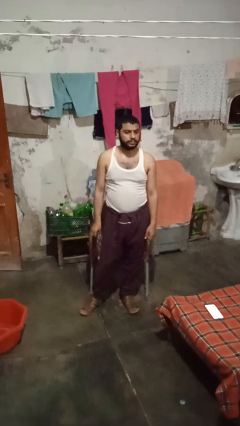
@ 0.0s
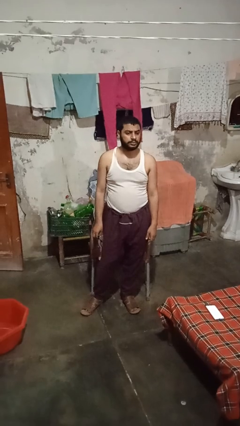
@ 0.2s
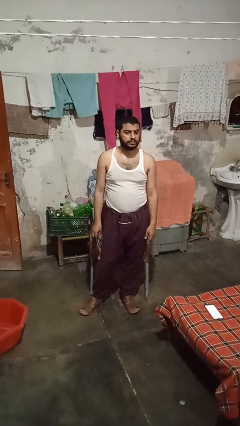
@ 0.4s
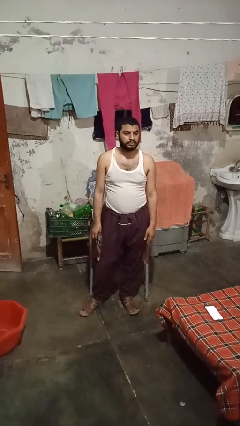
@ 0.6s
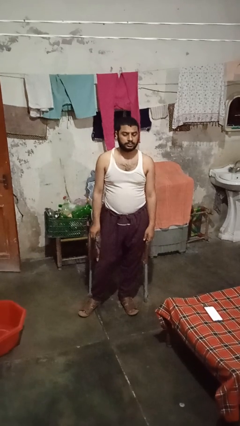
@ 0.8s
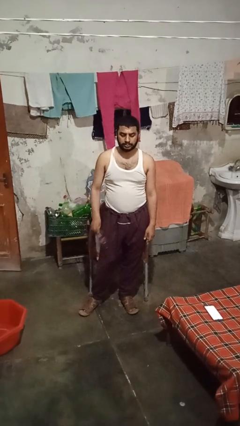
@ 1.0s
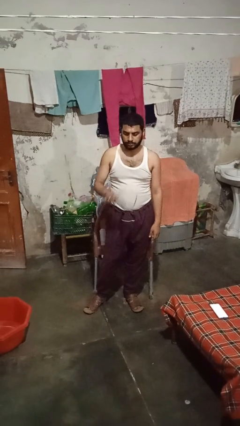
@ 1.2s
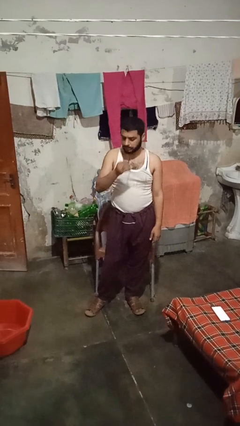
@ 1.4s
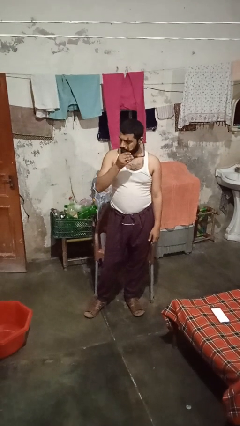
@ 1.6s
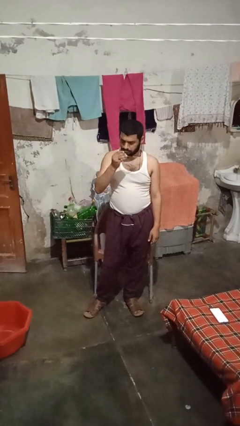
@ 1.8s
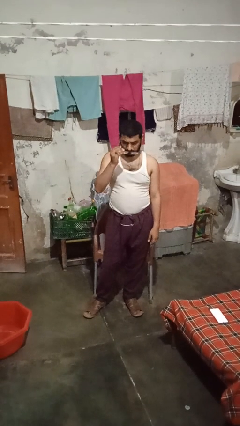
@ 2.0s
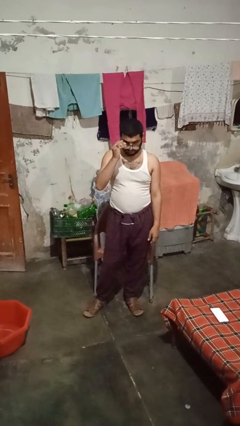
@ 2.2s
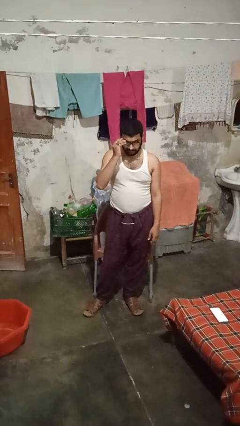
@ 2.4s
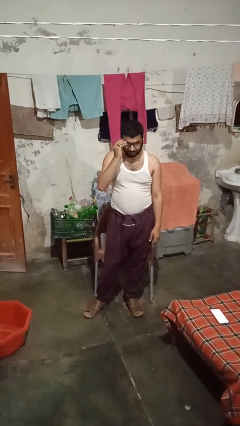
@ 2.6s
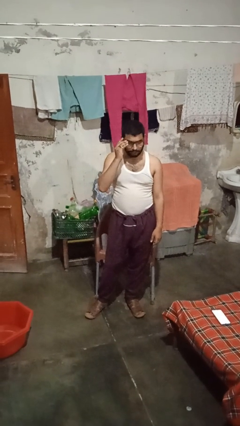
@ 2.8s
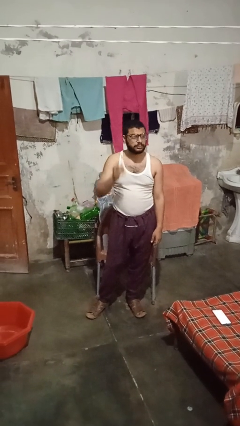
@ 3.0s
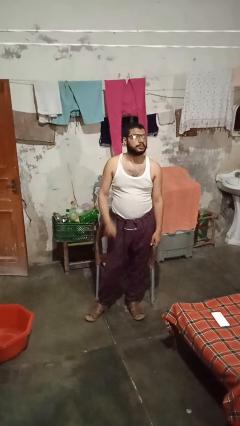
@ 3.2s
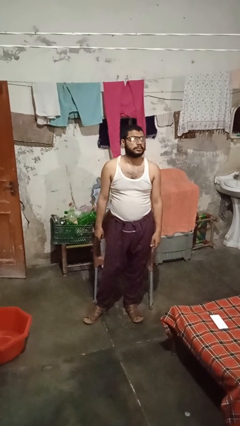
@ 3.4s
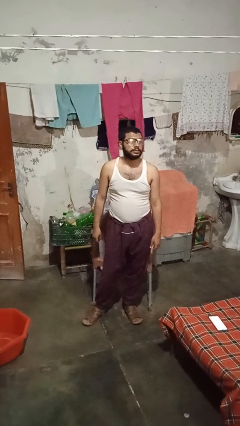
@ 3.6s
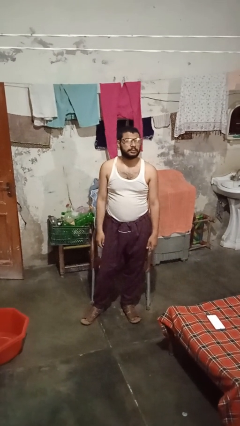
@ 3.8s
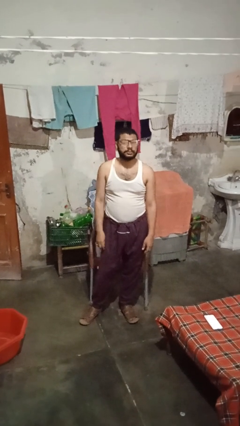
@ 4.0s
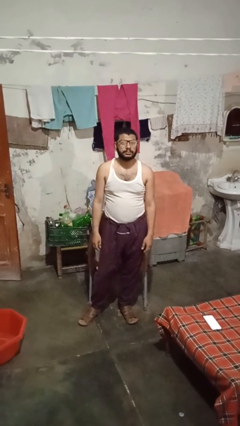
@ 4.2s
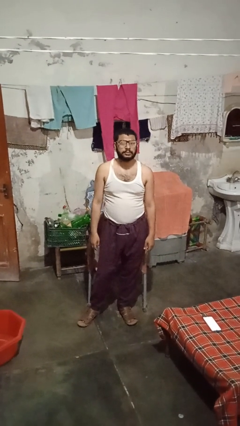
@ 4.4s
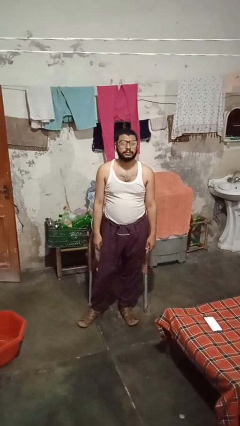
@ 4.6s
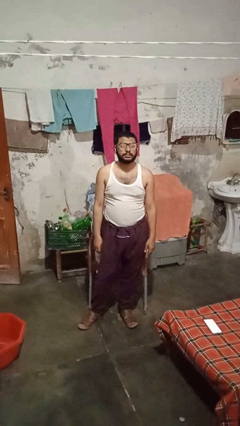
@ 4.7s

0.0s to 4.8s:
person puts on glasses

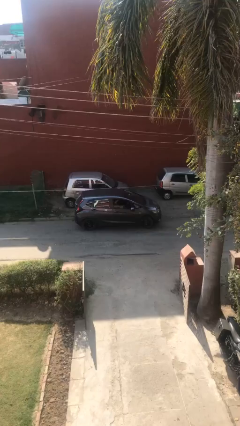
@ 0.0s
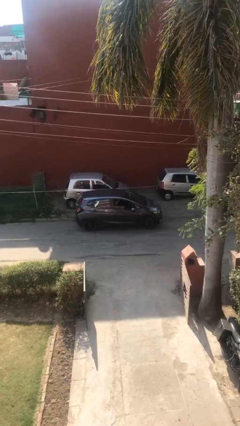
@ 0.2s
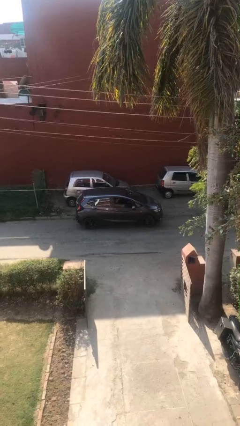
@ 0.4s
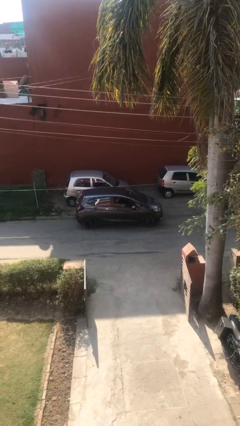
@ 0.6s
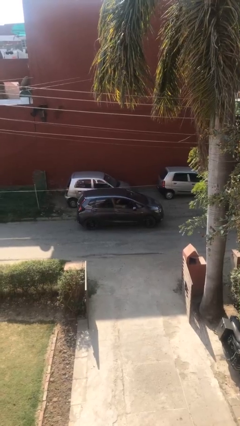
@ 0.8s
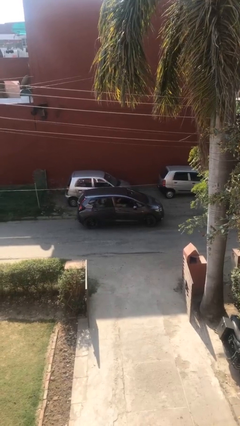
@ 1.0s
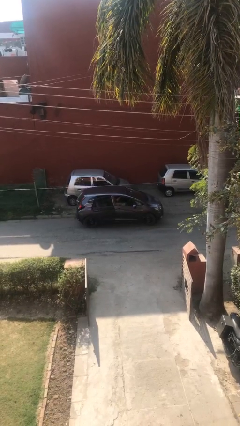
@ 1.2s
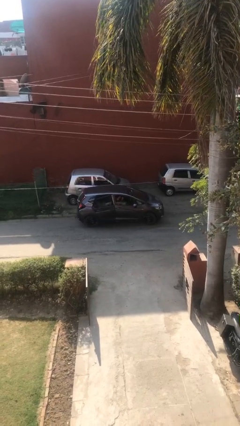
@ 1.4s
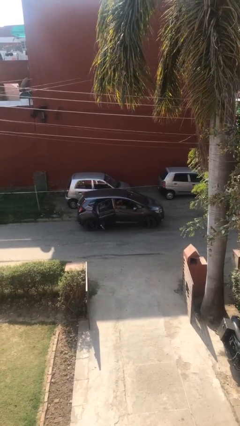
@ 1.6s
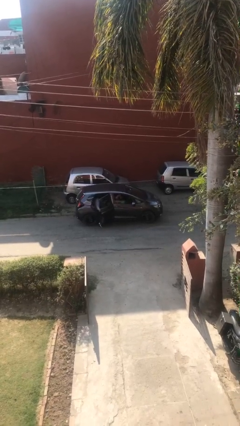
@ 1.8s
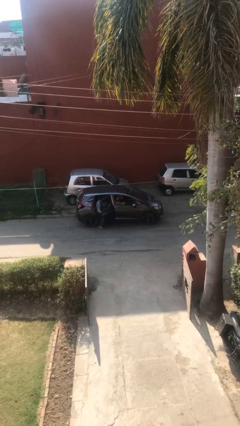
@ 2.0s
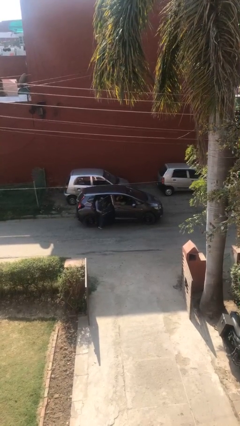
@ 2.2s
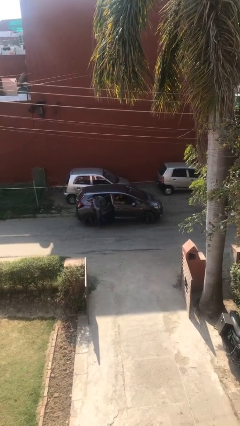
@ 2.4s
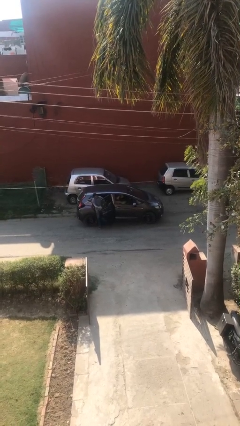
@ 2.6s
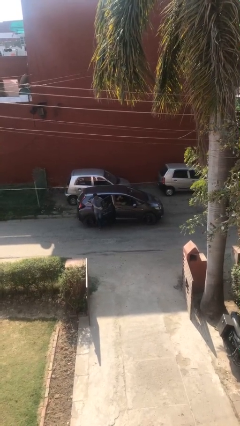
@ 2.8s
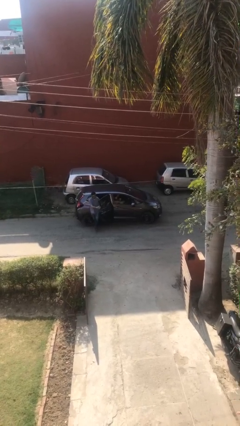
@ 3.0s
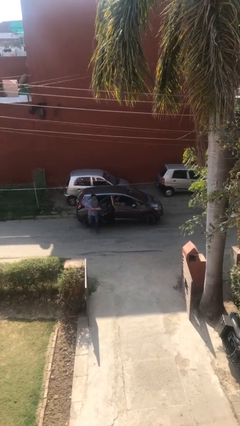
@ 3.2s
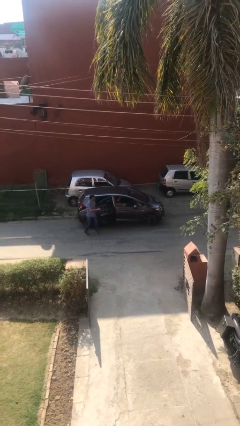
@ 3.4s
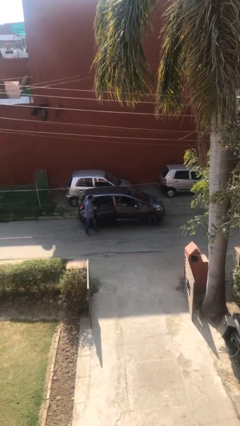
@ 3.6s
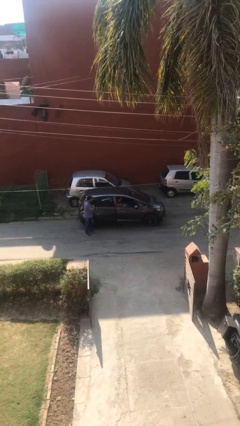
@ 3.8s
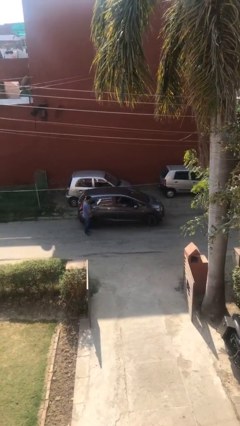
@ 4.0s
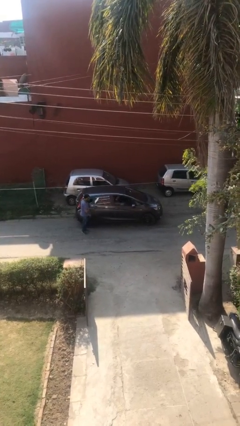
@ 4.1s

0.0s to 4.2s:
car drops off person

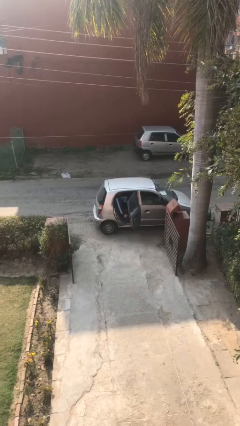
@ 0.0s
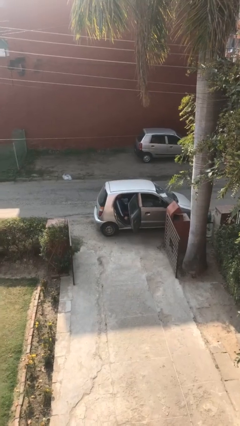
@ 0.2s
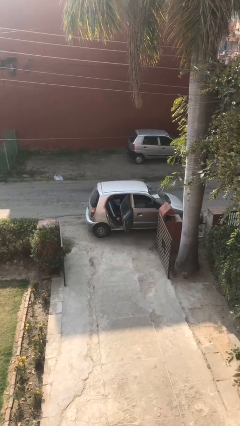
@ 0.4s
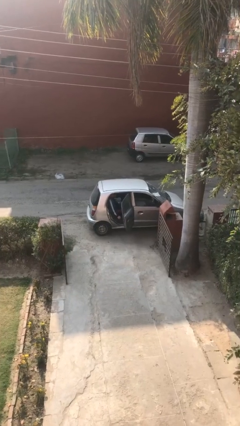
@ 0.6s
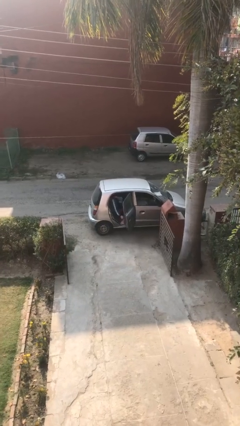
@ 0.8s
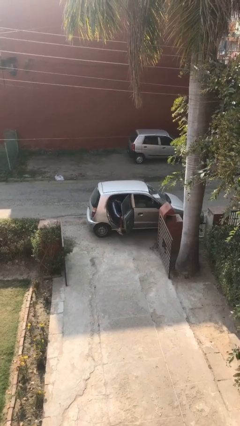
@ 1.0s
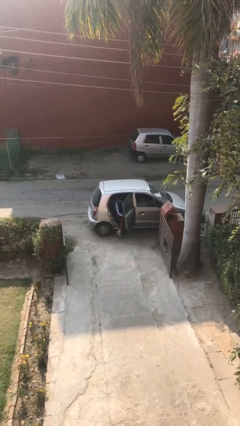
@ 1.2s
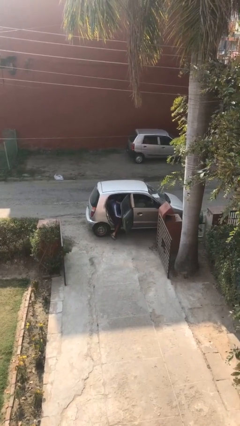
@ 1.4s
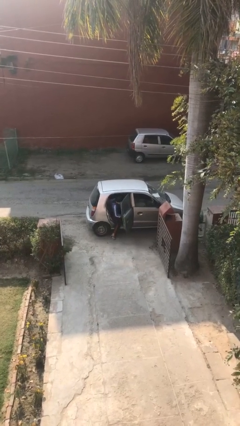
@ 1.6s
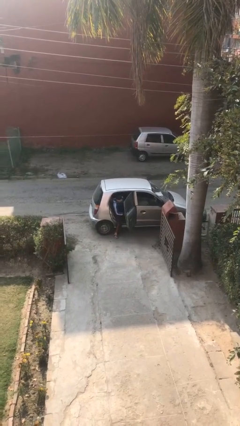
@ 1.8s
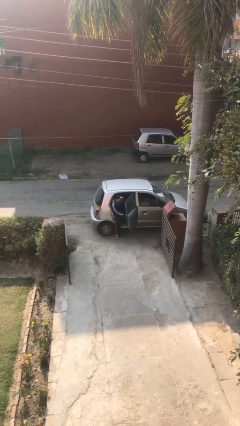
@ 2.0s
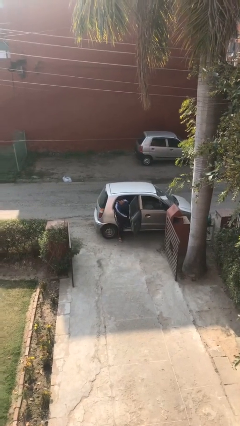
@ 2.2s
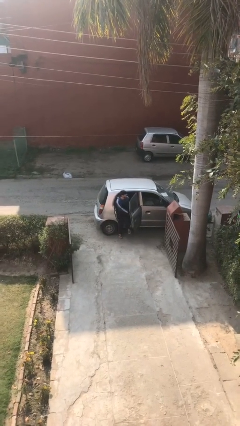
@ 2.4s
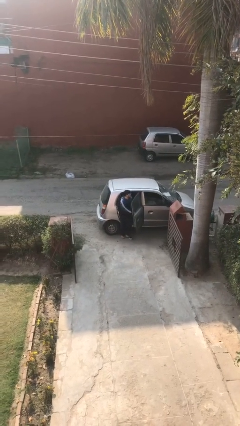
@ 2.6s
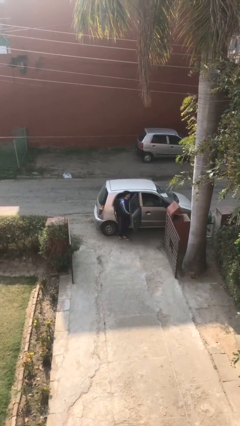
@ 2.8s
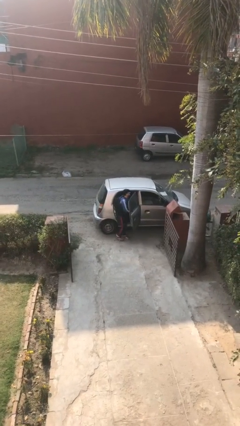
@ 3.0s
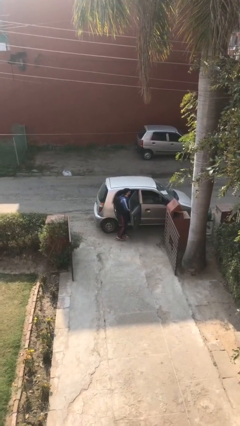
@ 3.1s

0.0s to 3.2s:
person exits car

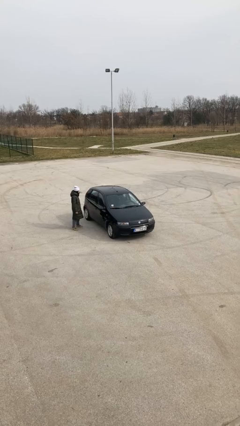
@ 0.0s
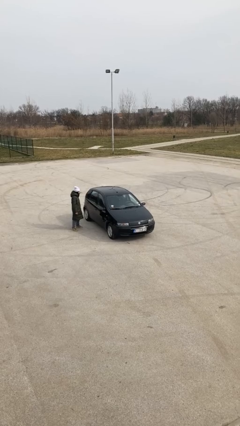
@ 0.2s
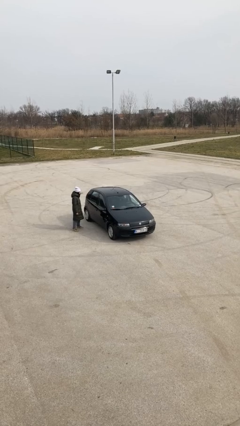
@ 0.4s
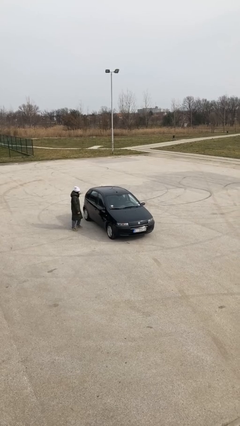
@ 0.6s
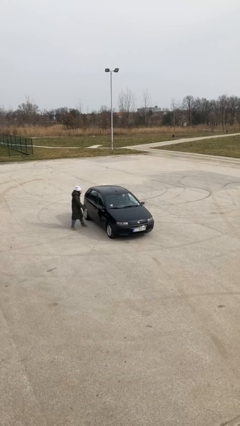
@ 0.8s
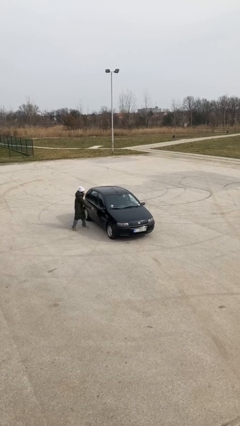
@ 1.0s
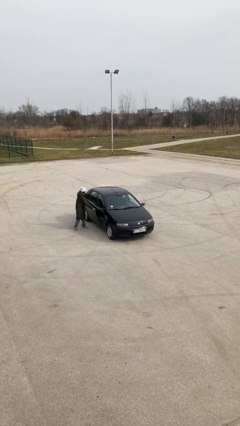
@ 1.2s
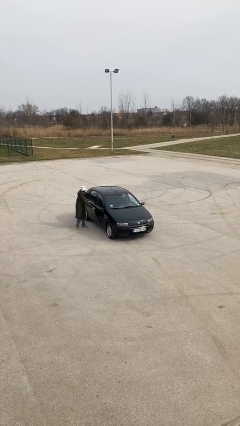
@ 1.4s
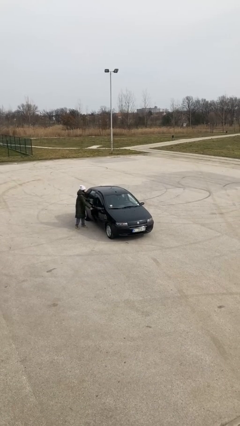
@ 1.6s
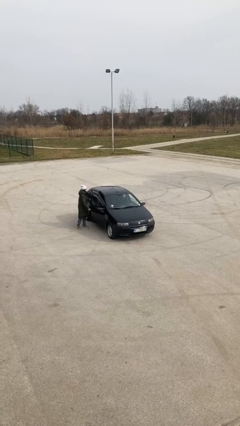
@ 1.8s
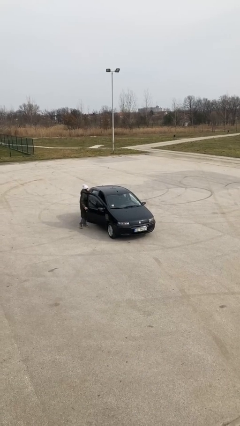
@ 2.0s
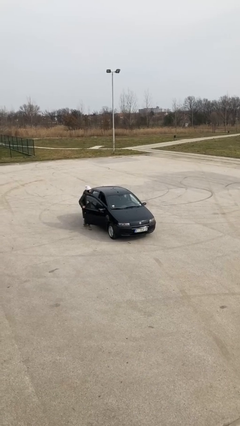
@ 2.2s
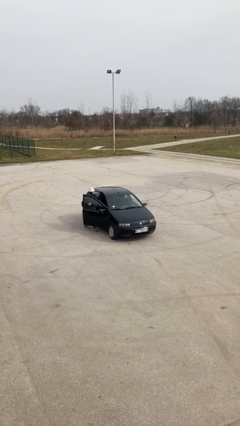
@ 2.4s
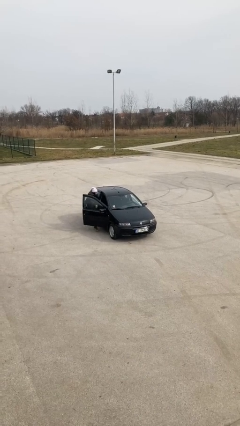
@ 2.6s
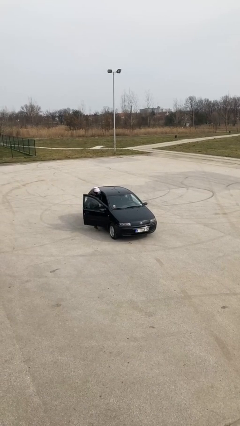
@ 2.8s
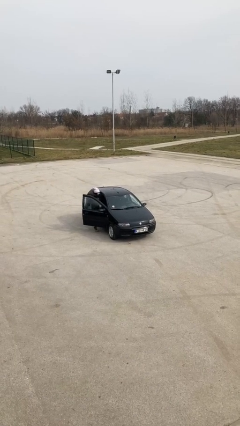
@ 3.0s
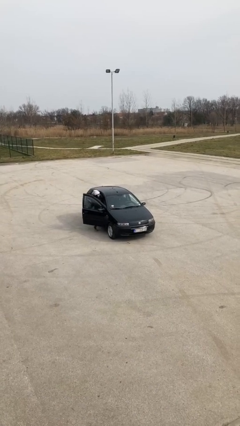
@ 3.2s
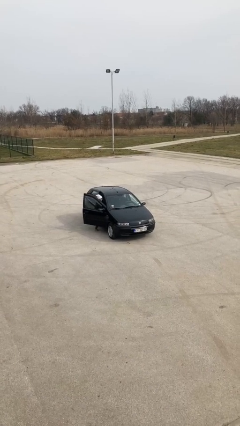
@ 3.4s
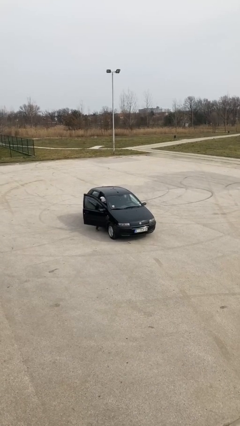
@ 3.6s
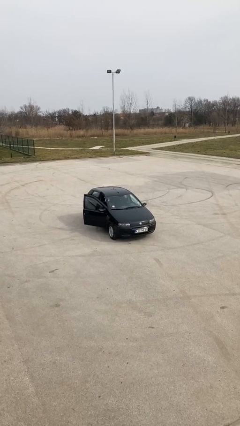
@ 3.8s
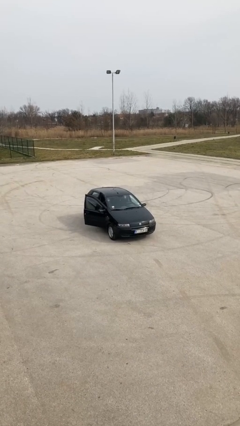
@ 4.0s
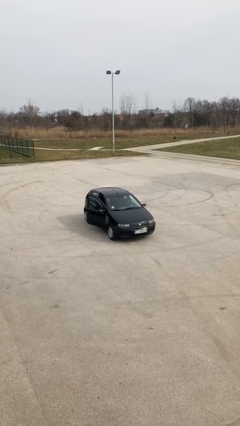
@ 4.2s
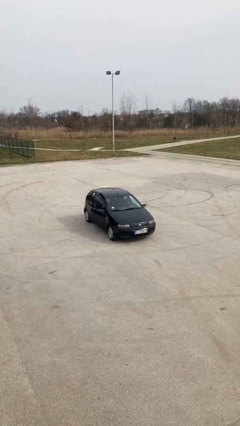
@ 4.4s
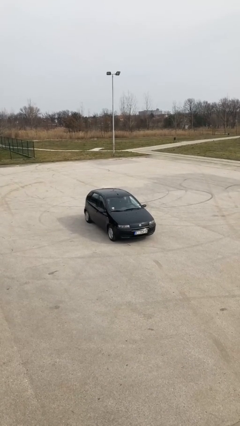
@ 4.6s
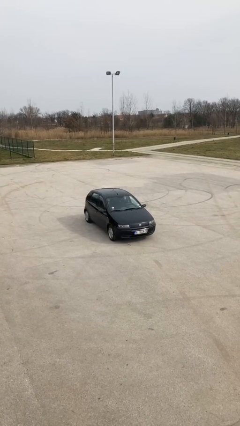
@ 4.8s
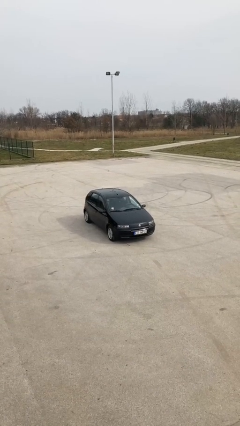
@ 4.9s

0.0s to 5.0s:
car picks up person

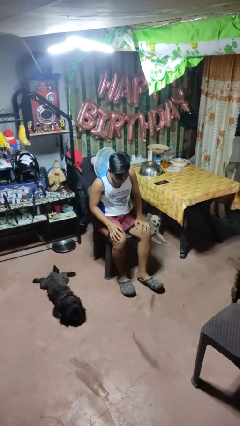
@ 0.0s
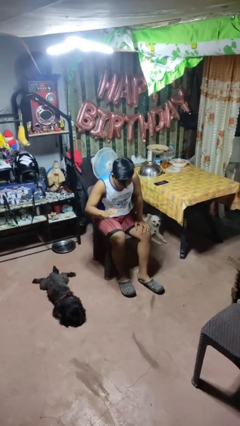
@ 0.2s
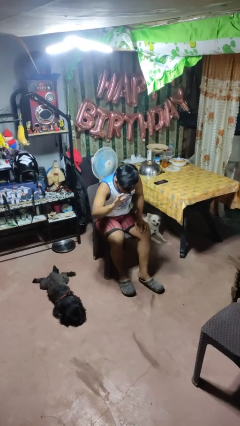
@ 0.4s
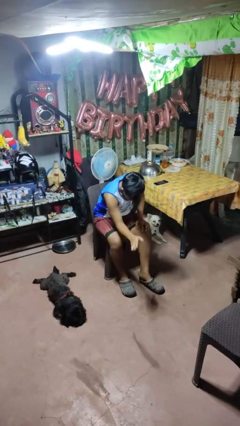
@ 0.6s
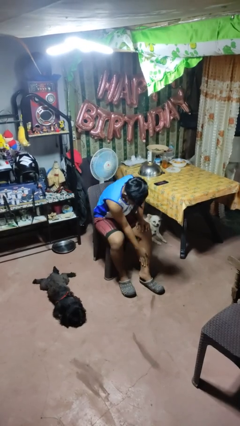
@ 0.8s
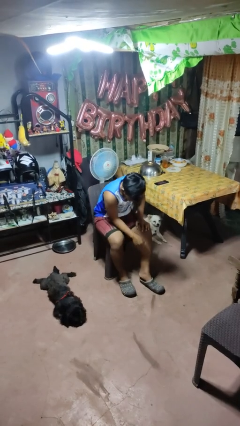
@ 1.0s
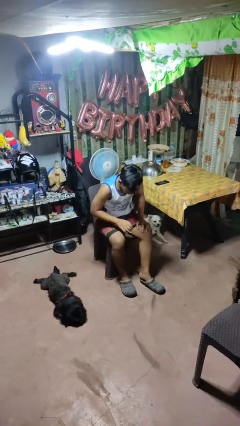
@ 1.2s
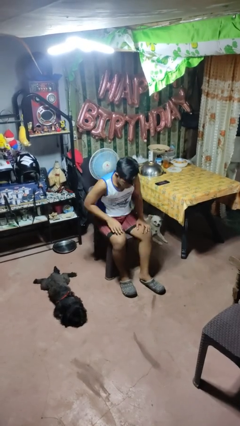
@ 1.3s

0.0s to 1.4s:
person swats bug
